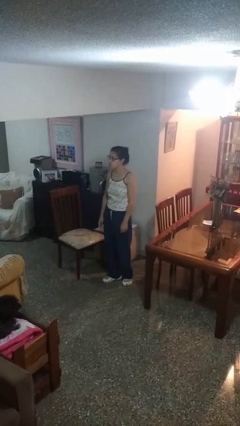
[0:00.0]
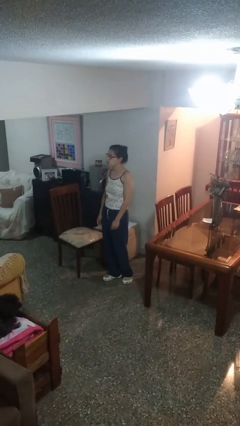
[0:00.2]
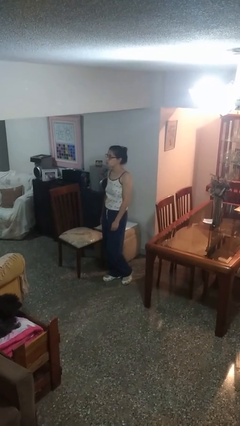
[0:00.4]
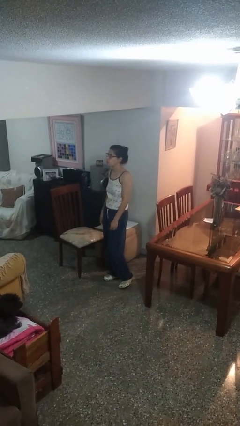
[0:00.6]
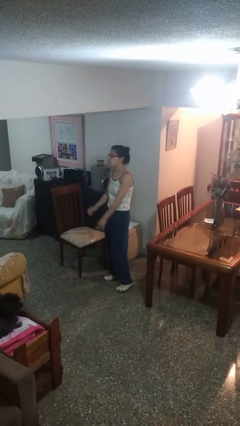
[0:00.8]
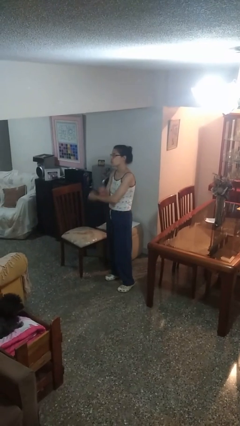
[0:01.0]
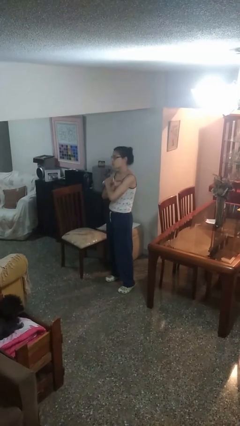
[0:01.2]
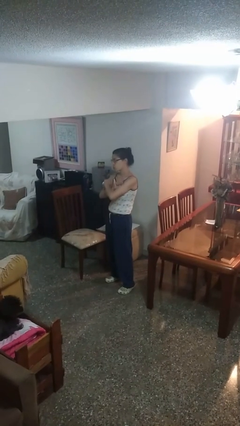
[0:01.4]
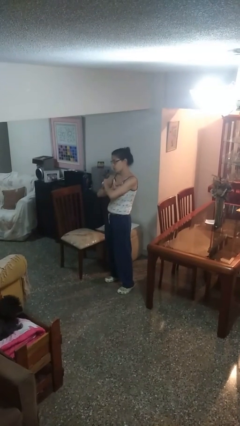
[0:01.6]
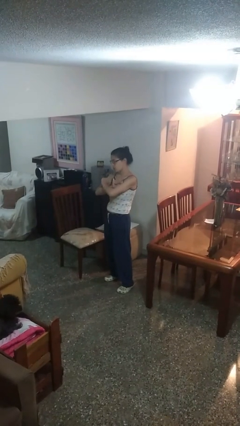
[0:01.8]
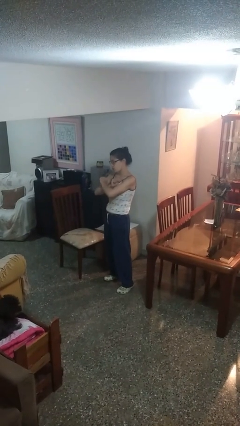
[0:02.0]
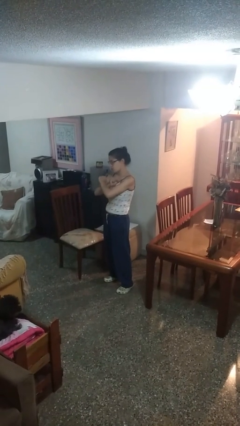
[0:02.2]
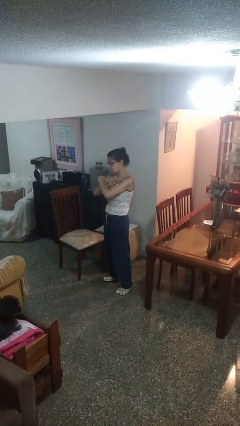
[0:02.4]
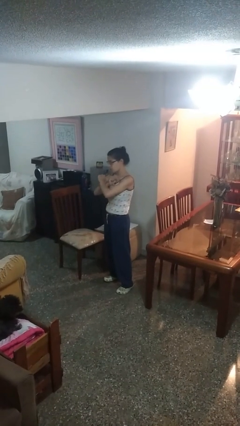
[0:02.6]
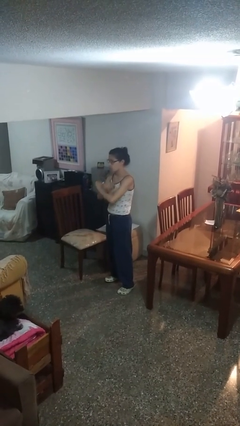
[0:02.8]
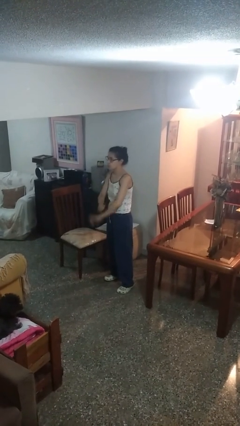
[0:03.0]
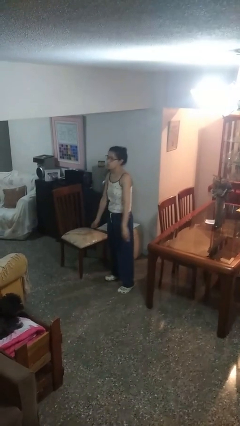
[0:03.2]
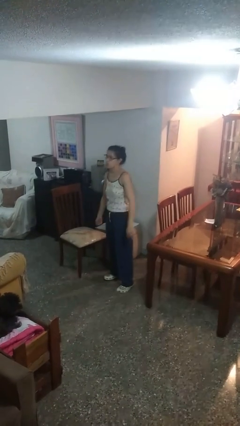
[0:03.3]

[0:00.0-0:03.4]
person gestures arms x

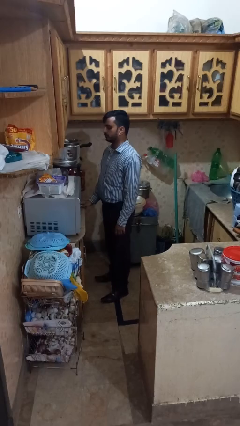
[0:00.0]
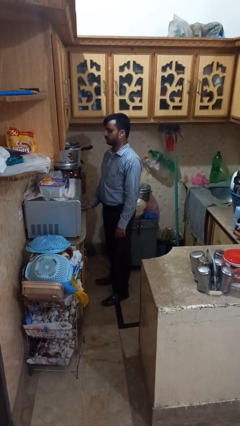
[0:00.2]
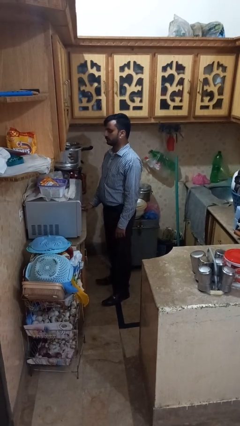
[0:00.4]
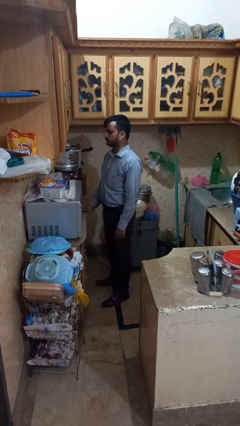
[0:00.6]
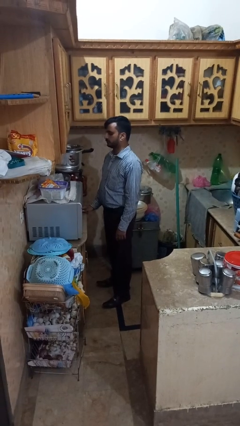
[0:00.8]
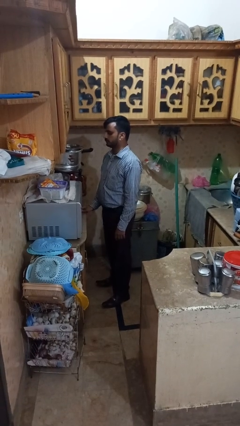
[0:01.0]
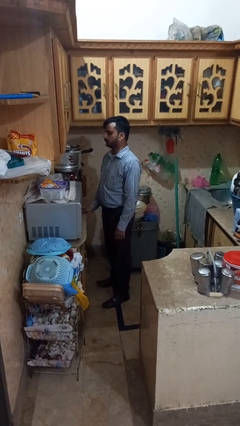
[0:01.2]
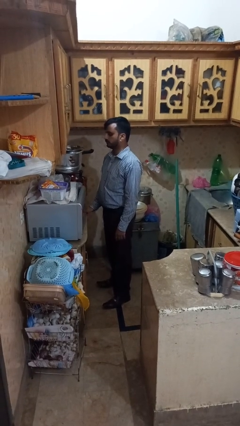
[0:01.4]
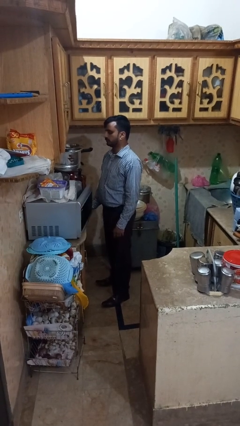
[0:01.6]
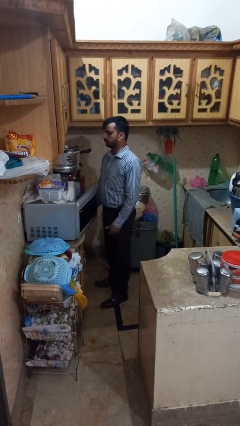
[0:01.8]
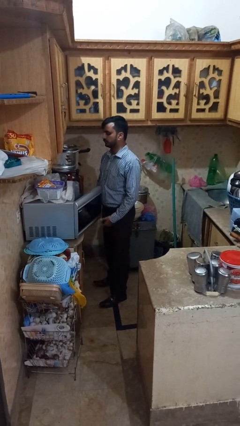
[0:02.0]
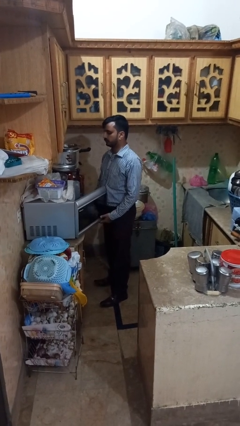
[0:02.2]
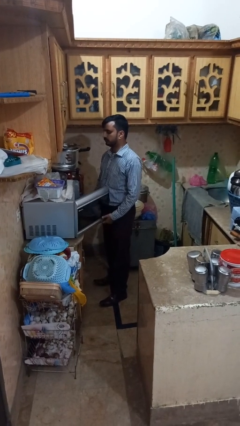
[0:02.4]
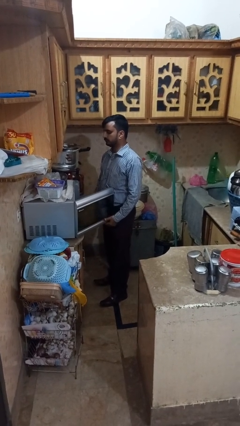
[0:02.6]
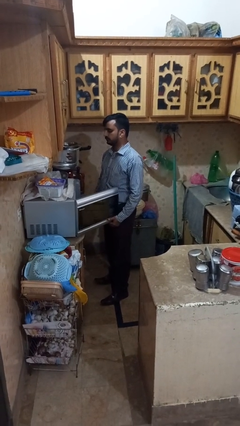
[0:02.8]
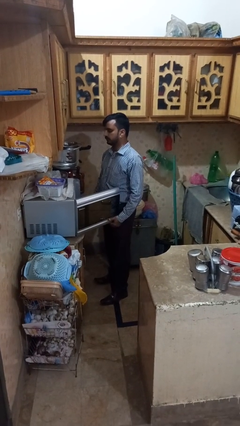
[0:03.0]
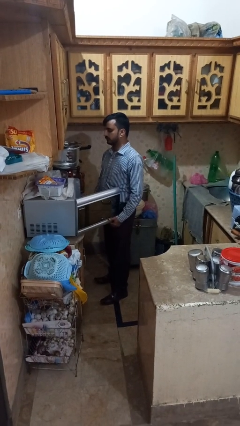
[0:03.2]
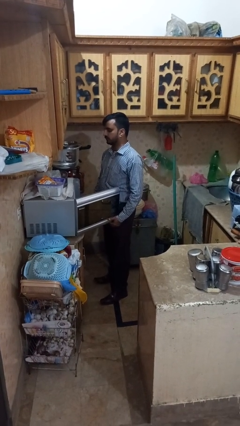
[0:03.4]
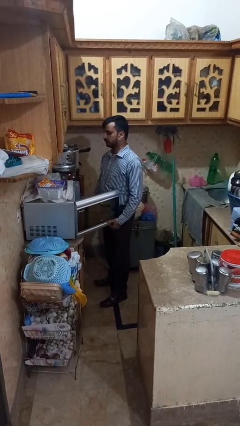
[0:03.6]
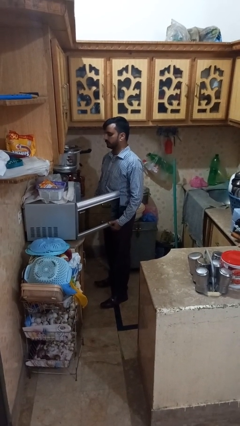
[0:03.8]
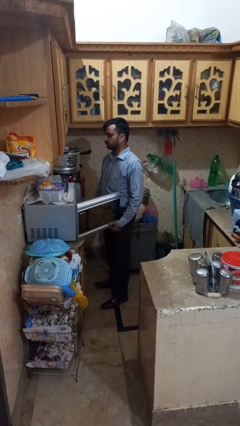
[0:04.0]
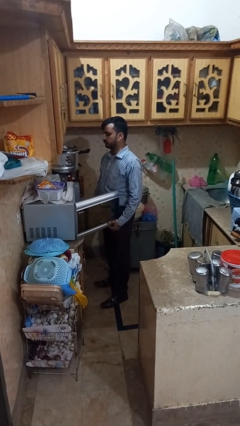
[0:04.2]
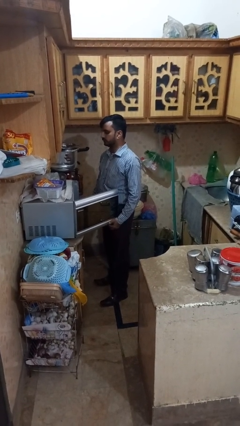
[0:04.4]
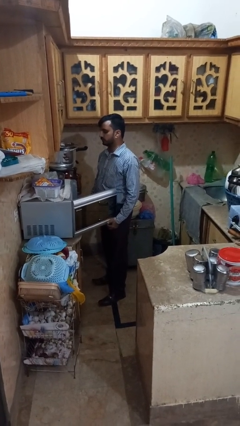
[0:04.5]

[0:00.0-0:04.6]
person opens microwave

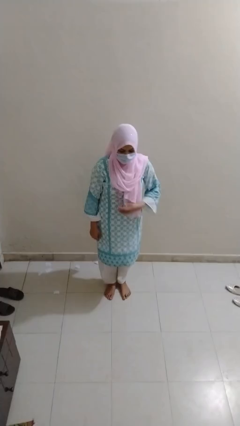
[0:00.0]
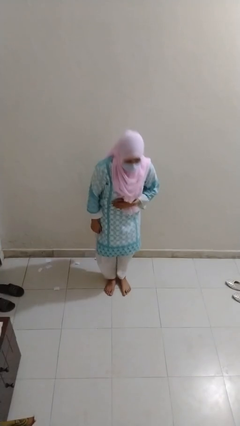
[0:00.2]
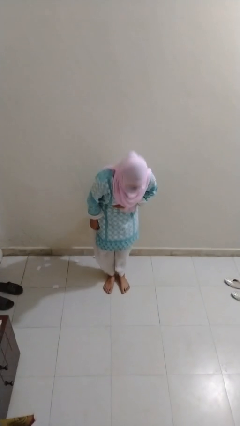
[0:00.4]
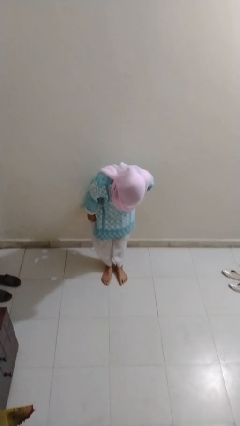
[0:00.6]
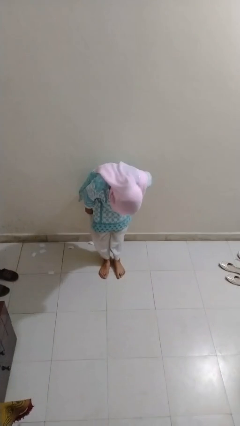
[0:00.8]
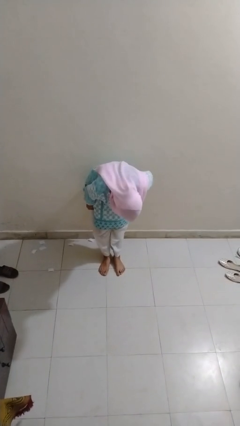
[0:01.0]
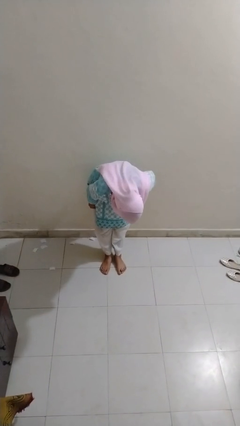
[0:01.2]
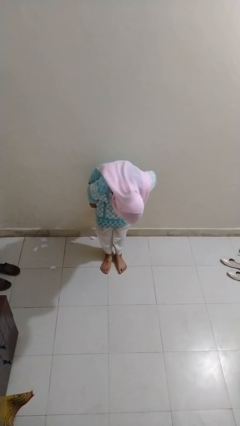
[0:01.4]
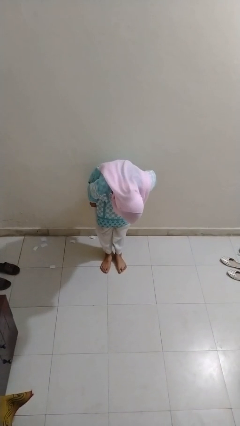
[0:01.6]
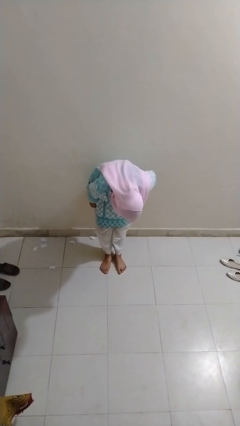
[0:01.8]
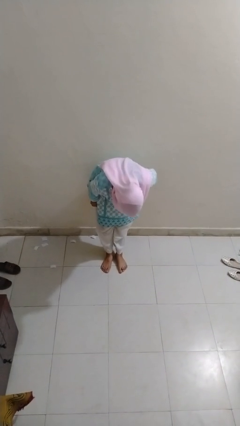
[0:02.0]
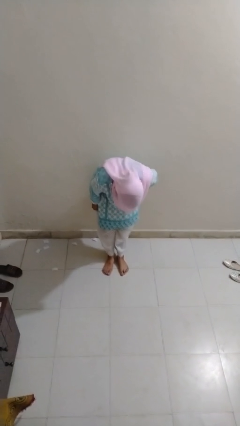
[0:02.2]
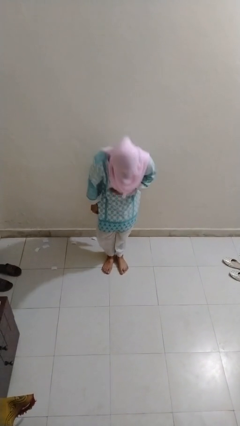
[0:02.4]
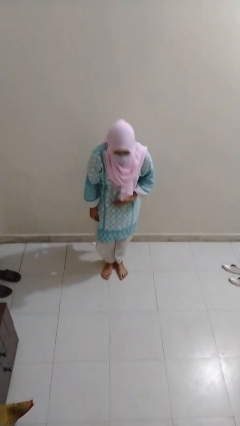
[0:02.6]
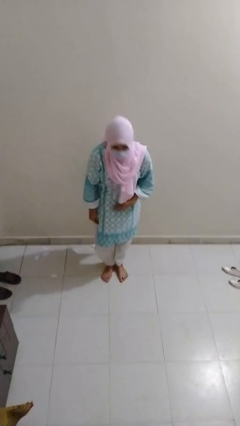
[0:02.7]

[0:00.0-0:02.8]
person bows

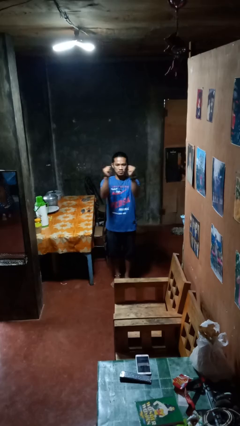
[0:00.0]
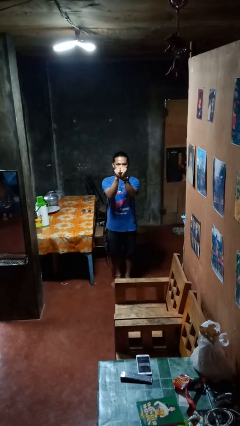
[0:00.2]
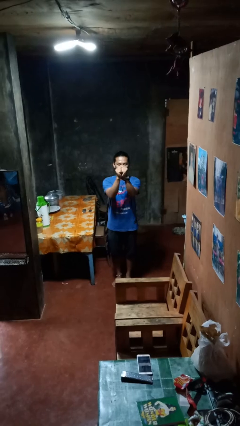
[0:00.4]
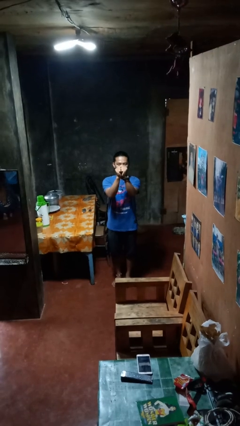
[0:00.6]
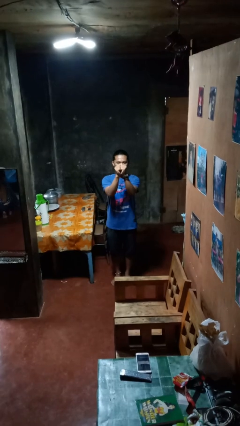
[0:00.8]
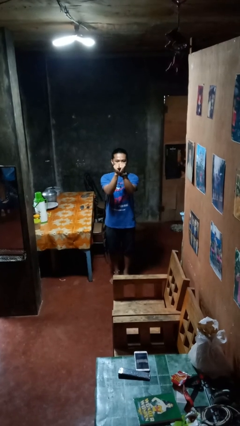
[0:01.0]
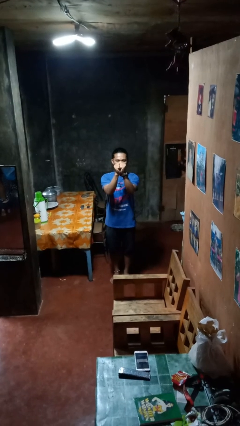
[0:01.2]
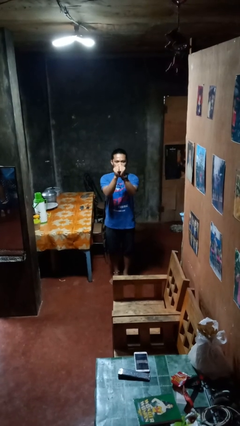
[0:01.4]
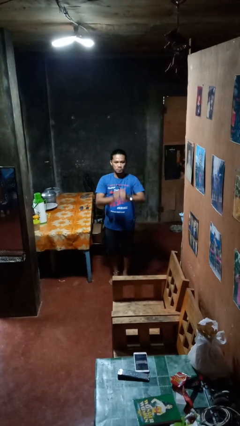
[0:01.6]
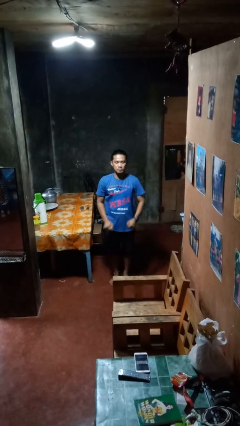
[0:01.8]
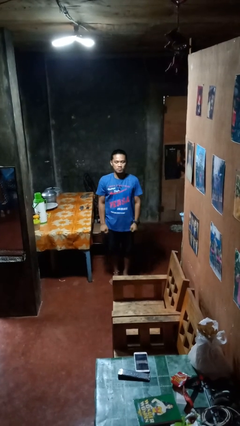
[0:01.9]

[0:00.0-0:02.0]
person gestures zoom out

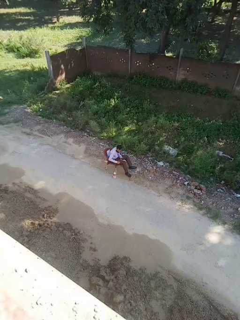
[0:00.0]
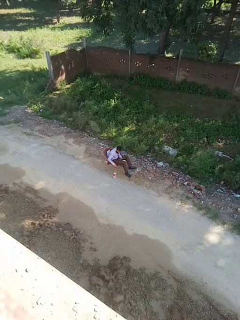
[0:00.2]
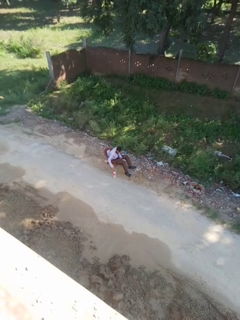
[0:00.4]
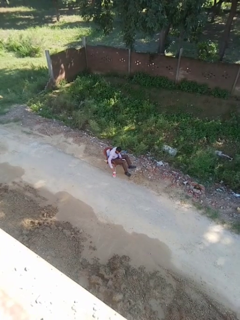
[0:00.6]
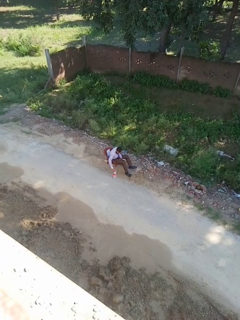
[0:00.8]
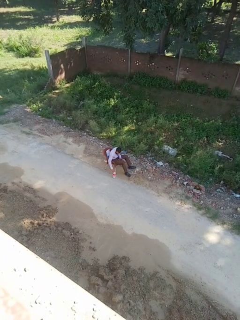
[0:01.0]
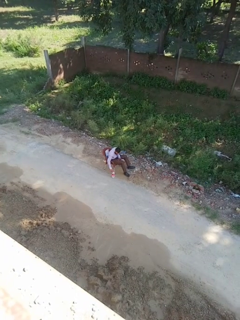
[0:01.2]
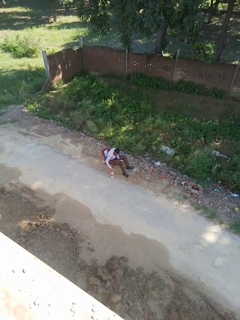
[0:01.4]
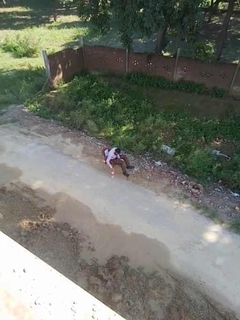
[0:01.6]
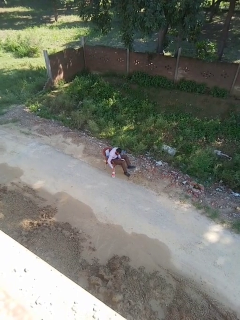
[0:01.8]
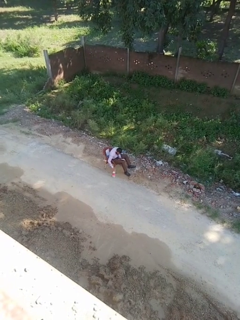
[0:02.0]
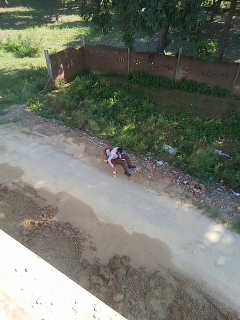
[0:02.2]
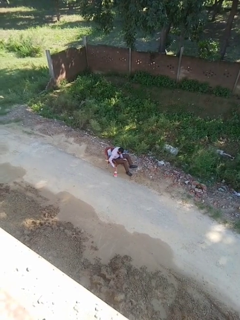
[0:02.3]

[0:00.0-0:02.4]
person taps object with finger

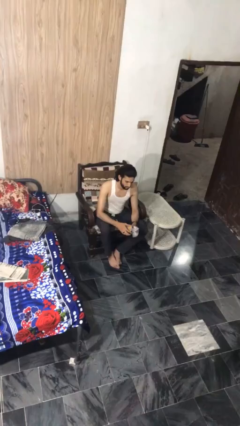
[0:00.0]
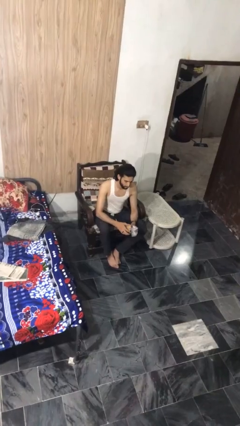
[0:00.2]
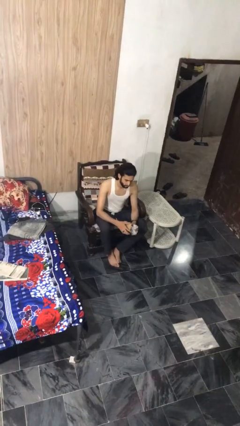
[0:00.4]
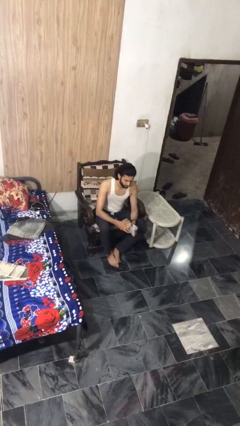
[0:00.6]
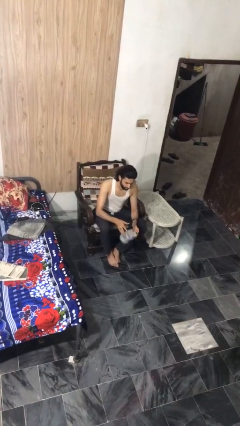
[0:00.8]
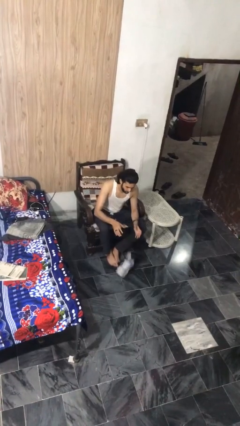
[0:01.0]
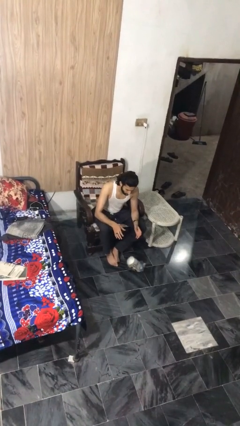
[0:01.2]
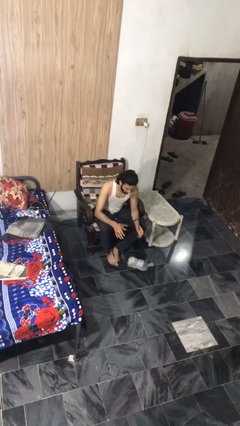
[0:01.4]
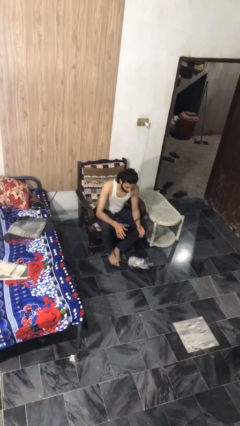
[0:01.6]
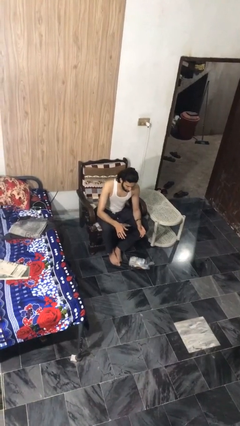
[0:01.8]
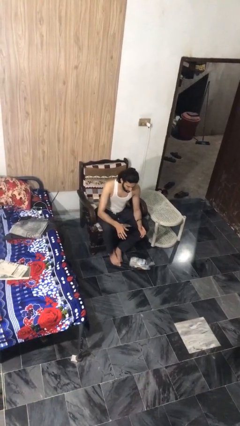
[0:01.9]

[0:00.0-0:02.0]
person drops object

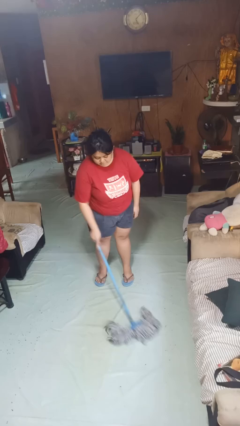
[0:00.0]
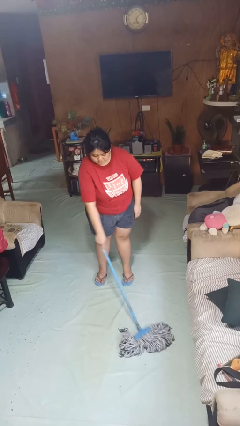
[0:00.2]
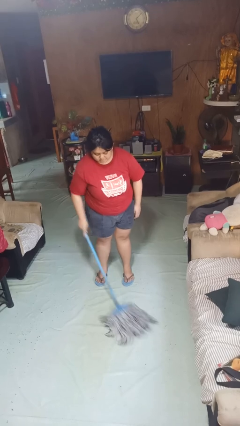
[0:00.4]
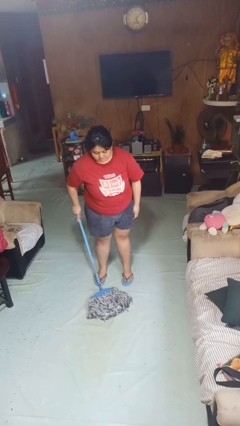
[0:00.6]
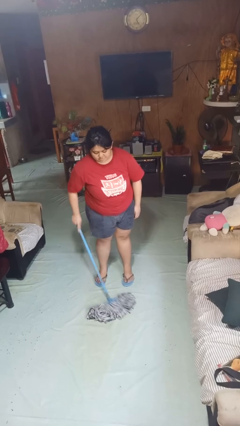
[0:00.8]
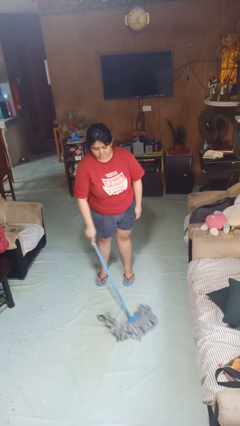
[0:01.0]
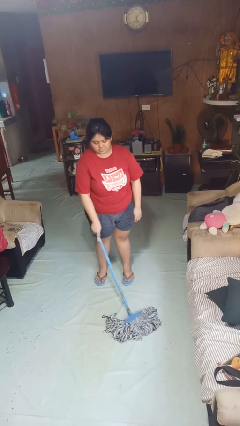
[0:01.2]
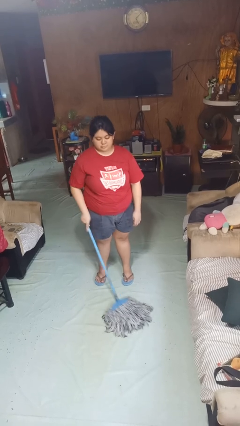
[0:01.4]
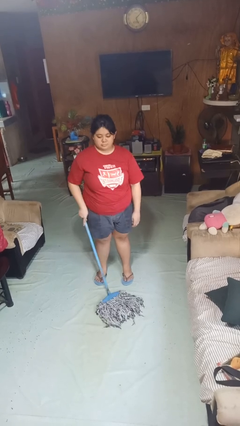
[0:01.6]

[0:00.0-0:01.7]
person mops
